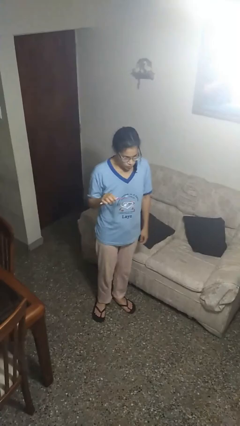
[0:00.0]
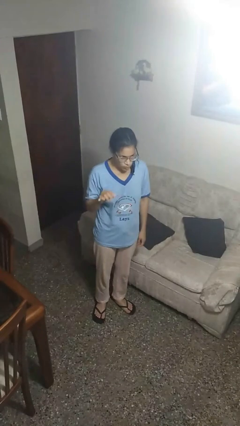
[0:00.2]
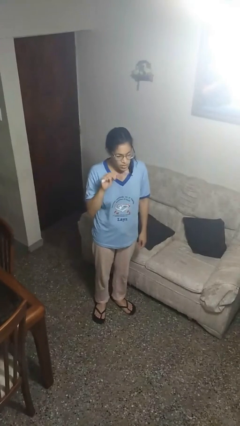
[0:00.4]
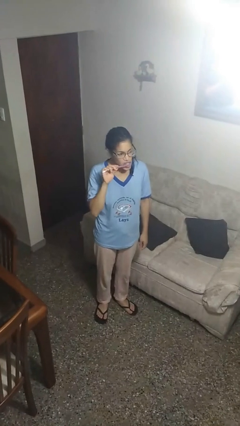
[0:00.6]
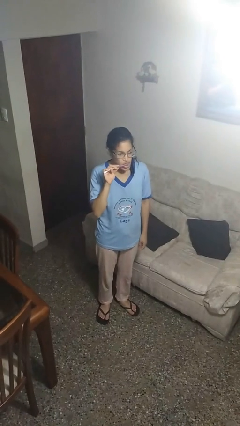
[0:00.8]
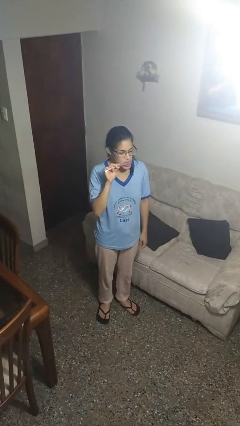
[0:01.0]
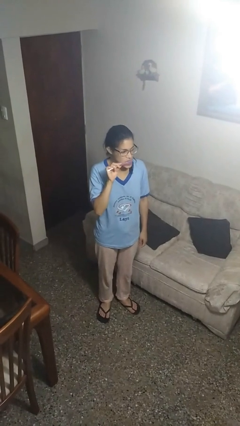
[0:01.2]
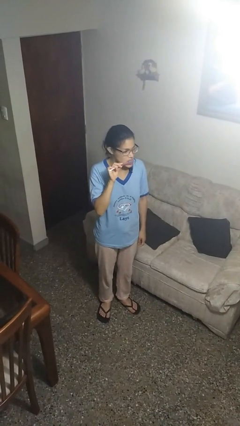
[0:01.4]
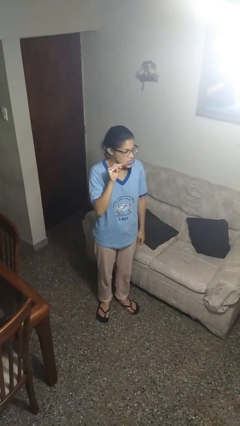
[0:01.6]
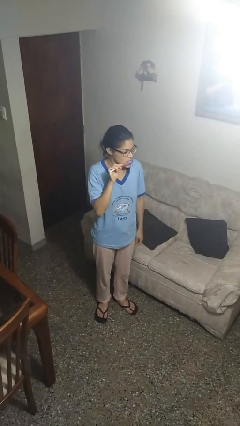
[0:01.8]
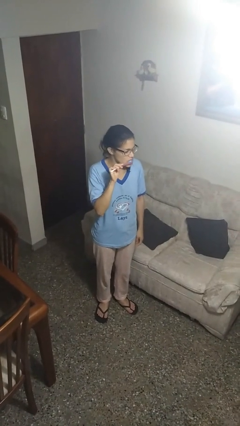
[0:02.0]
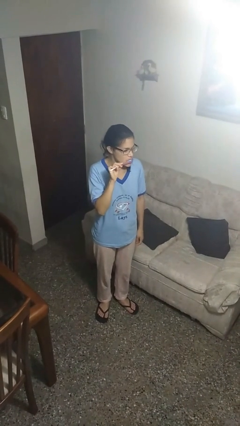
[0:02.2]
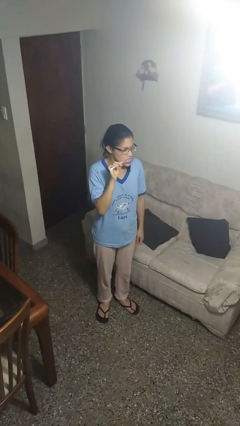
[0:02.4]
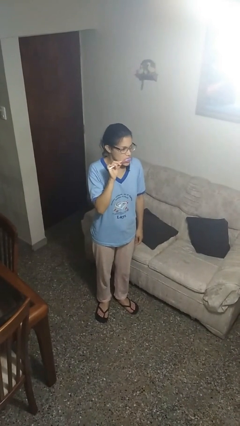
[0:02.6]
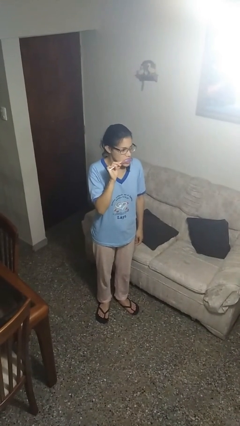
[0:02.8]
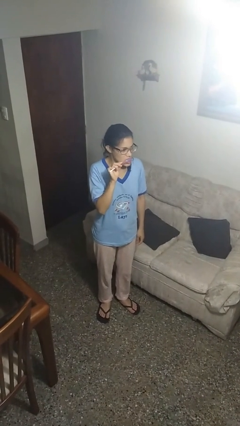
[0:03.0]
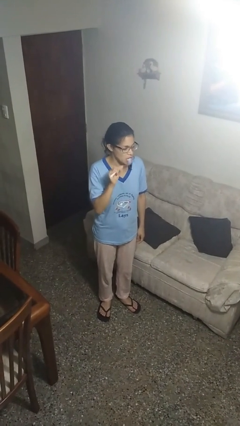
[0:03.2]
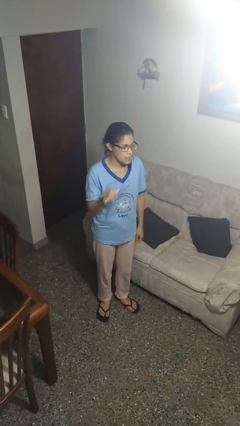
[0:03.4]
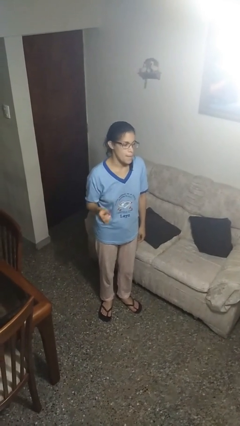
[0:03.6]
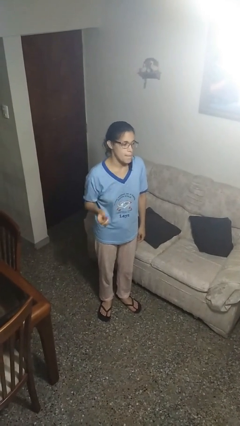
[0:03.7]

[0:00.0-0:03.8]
person brushes teeth

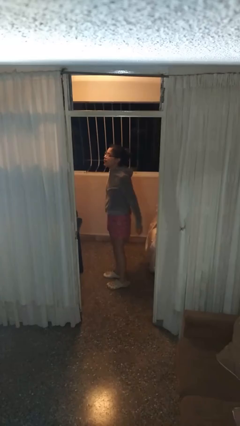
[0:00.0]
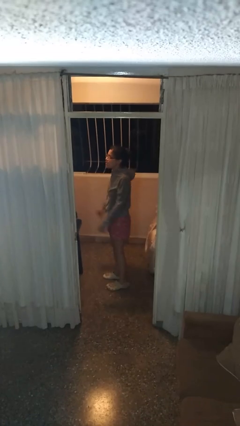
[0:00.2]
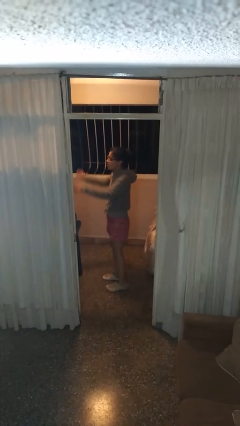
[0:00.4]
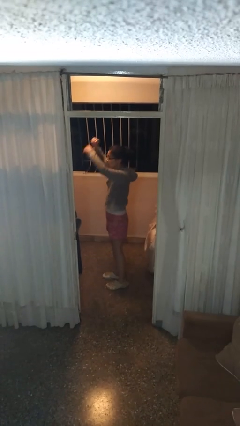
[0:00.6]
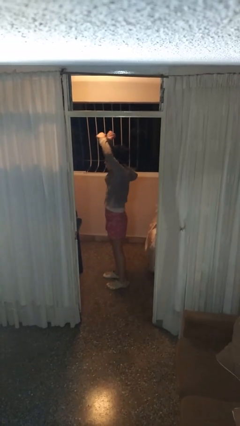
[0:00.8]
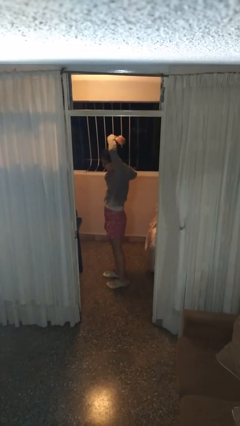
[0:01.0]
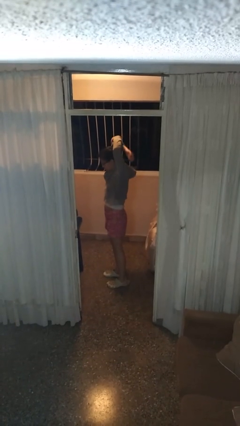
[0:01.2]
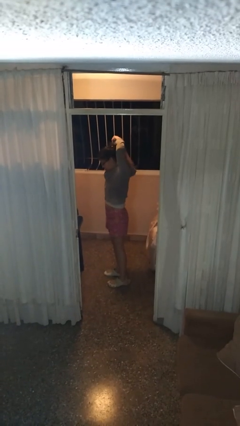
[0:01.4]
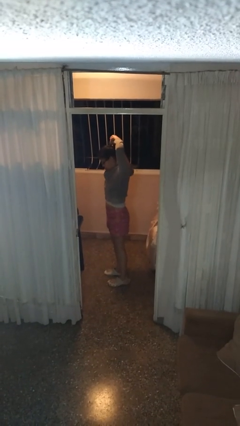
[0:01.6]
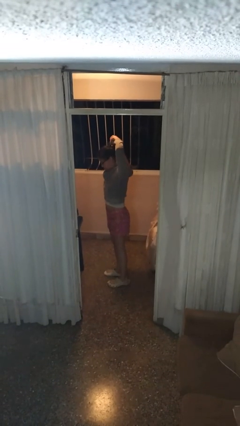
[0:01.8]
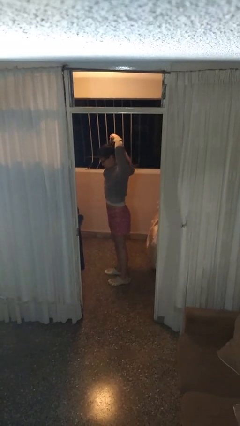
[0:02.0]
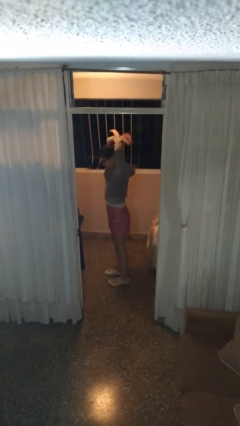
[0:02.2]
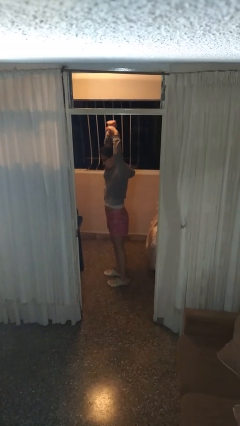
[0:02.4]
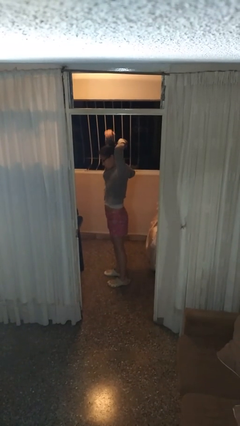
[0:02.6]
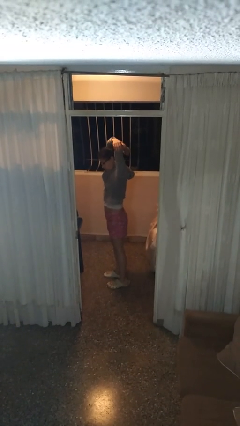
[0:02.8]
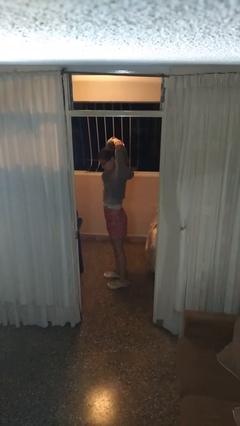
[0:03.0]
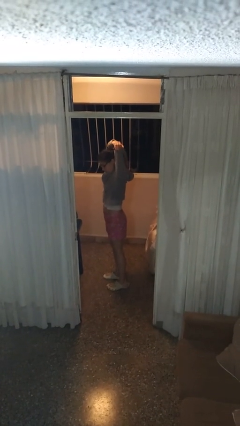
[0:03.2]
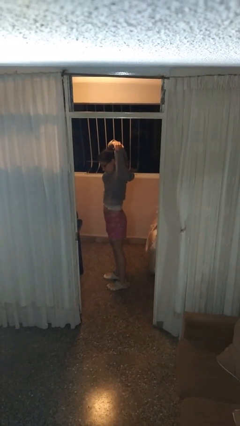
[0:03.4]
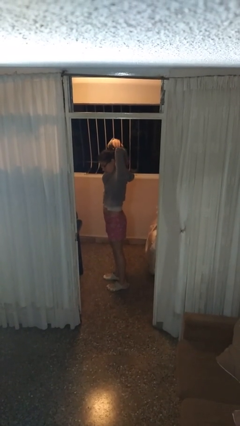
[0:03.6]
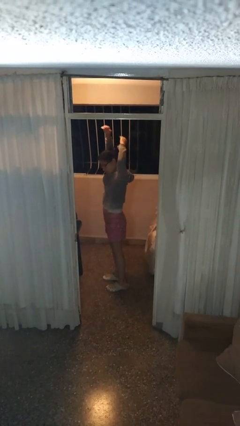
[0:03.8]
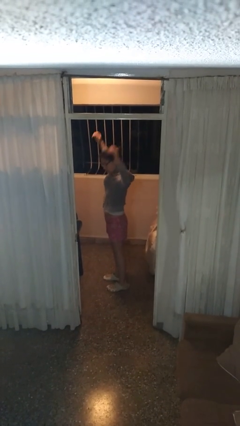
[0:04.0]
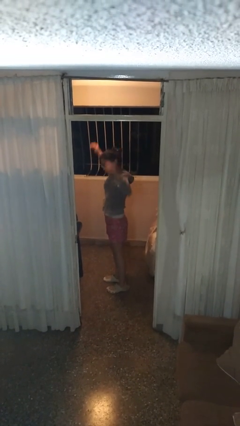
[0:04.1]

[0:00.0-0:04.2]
person stretches arms over head

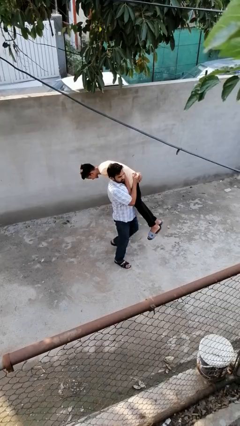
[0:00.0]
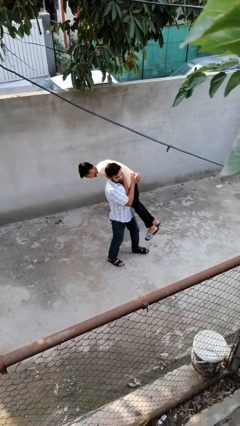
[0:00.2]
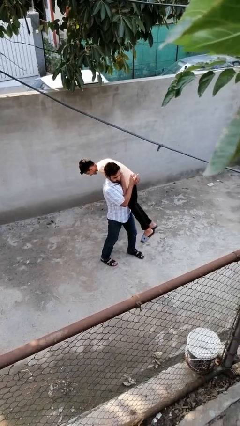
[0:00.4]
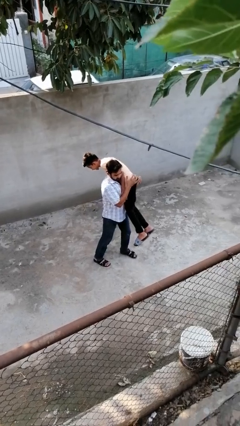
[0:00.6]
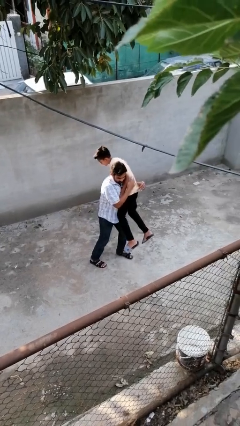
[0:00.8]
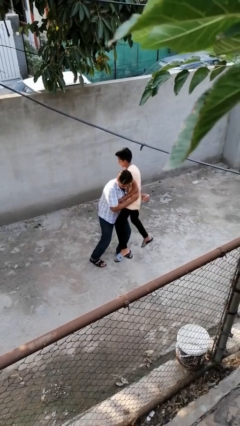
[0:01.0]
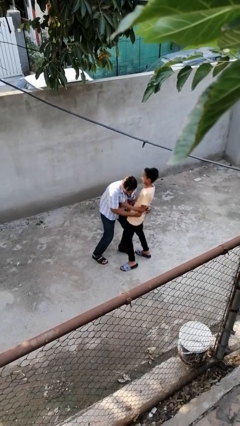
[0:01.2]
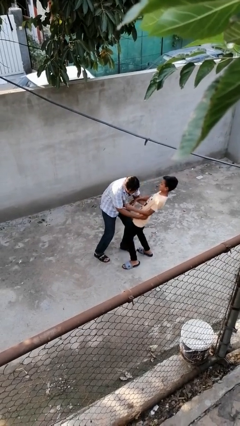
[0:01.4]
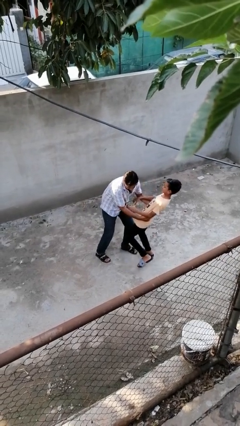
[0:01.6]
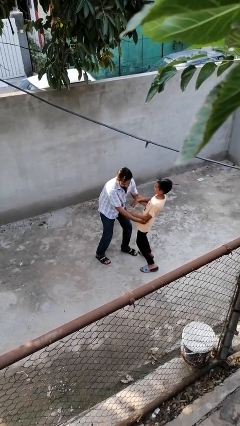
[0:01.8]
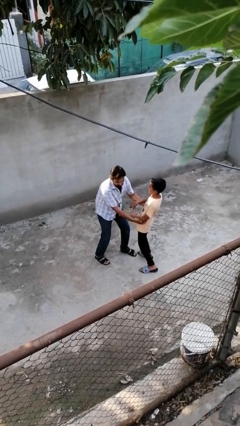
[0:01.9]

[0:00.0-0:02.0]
person puts down person

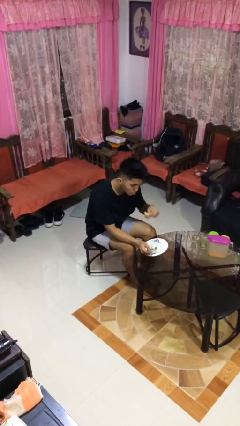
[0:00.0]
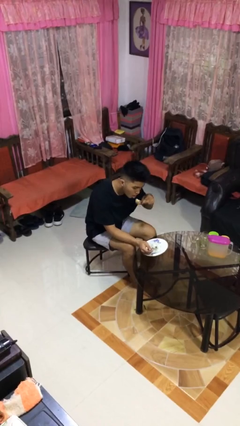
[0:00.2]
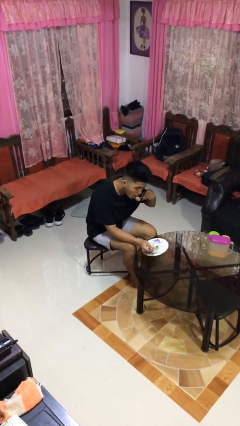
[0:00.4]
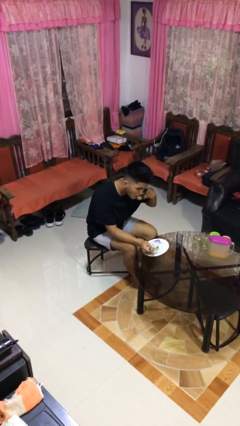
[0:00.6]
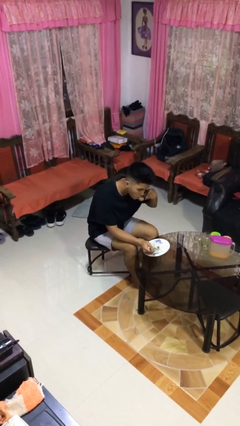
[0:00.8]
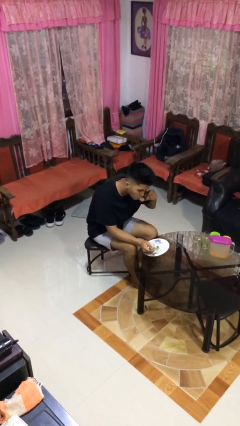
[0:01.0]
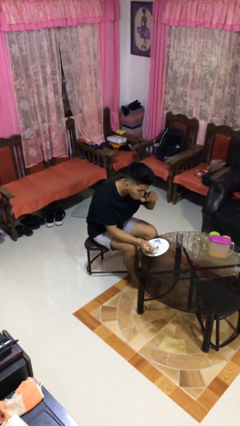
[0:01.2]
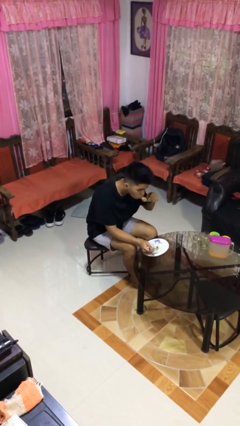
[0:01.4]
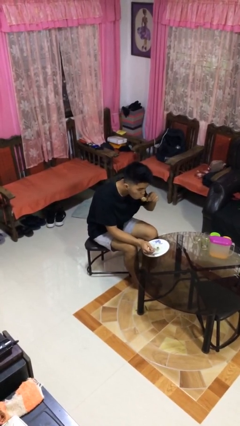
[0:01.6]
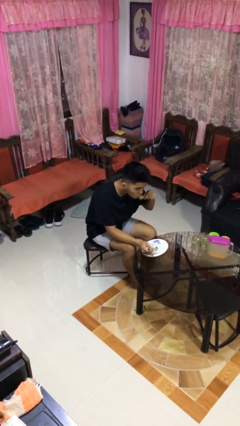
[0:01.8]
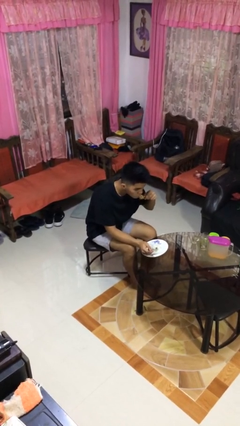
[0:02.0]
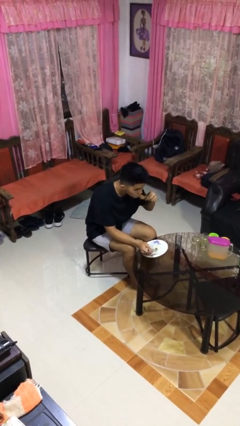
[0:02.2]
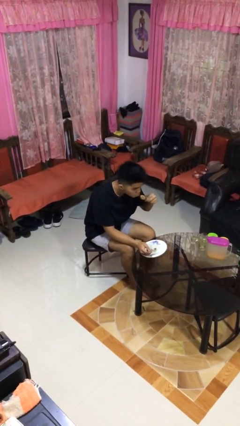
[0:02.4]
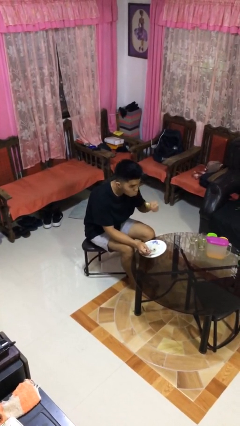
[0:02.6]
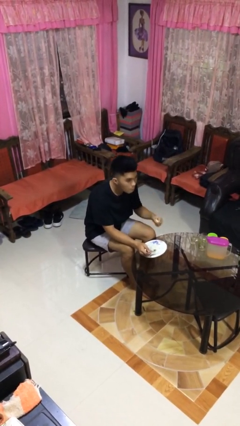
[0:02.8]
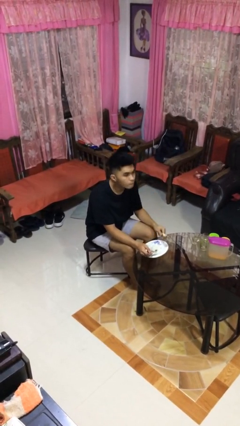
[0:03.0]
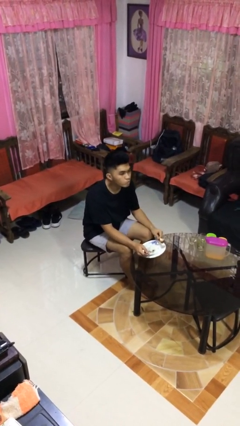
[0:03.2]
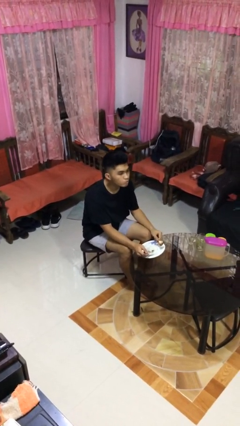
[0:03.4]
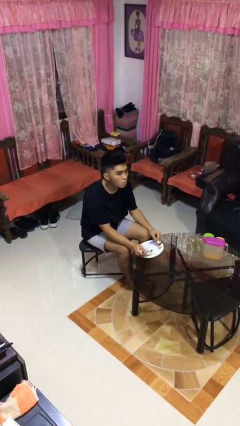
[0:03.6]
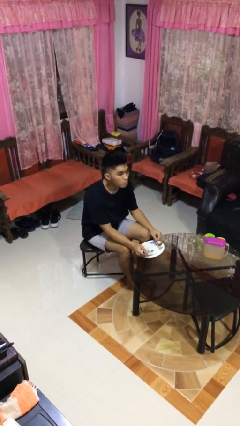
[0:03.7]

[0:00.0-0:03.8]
person eats with utensil

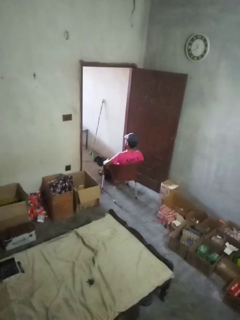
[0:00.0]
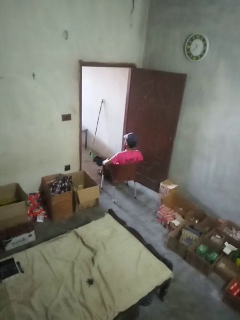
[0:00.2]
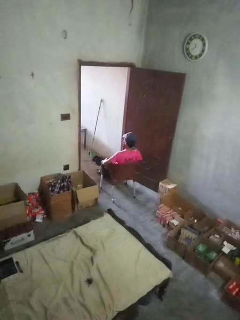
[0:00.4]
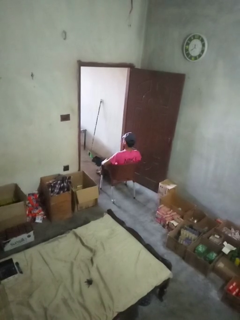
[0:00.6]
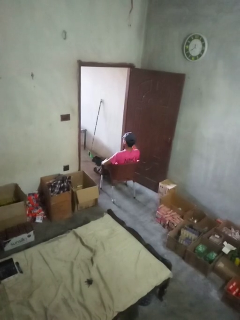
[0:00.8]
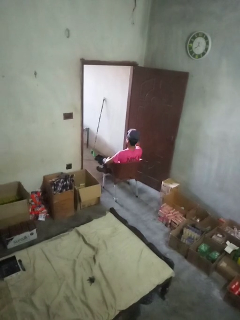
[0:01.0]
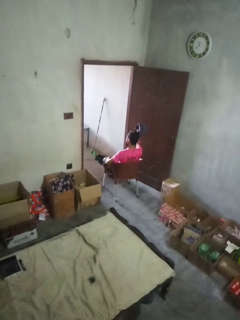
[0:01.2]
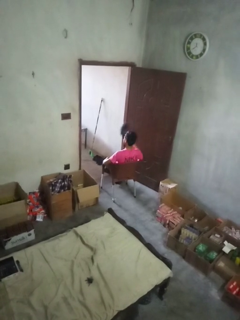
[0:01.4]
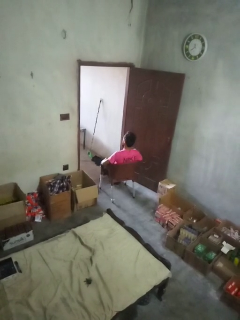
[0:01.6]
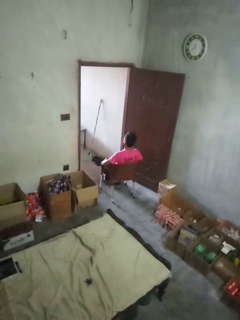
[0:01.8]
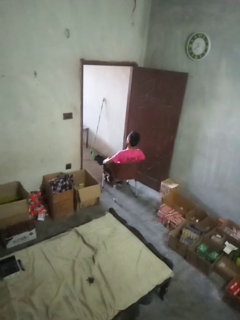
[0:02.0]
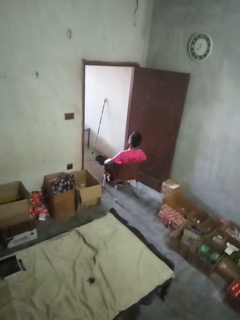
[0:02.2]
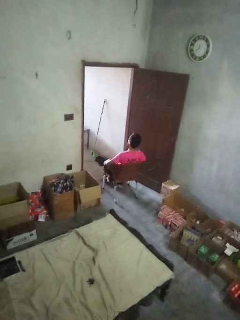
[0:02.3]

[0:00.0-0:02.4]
person takes off hat

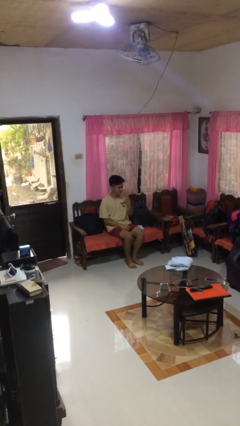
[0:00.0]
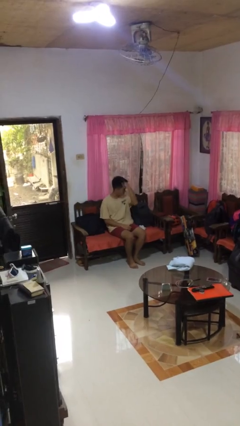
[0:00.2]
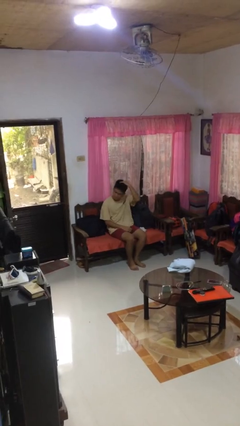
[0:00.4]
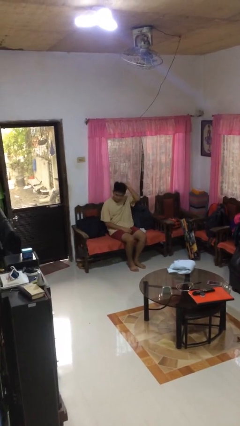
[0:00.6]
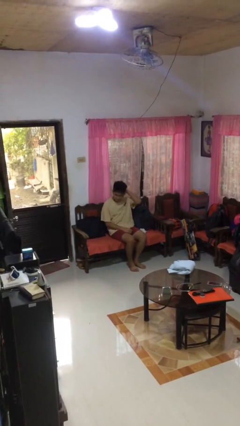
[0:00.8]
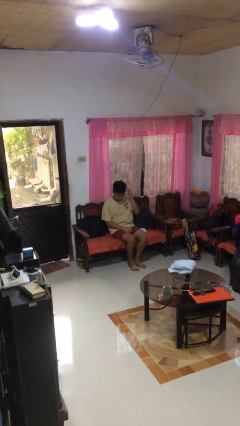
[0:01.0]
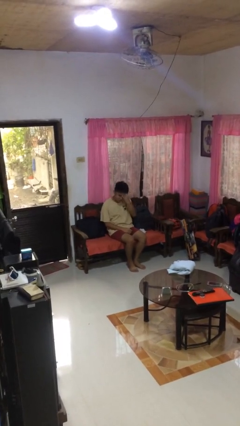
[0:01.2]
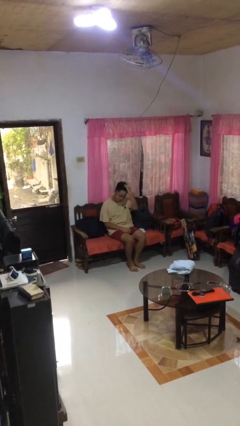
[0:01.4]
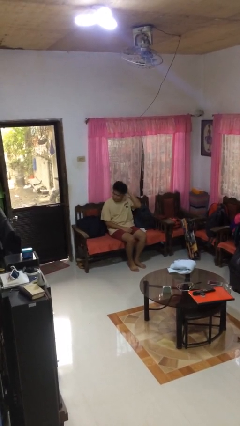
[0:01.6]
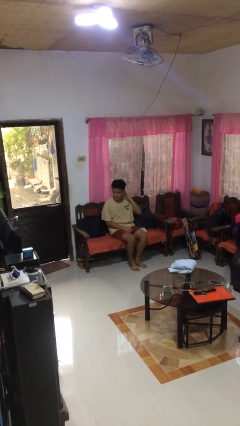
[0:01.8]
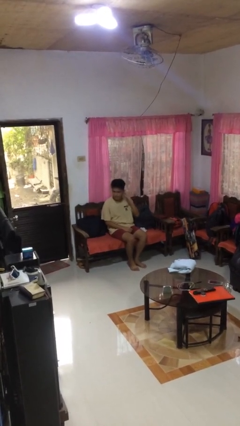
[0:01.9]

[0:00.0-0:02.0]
person strokes hair
